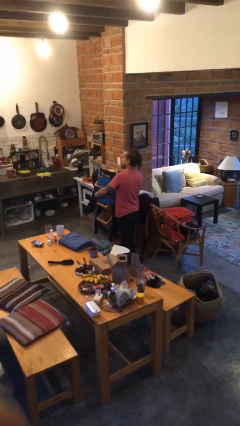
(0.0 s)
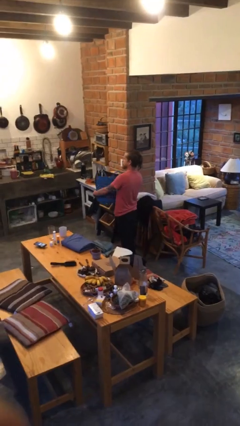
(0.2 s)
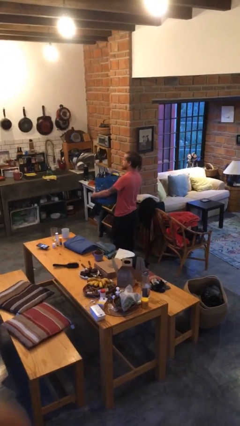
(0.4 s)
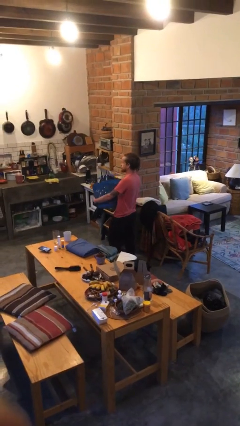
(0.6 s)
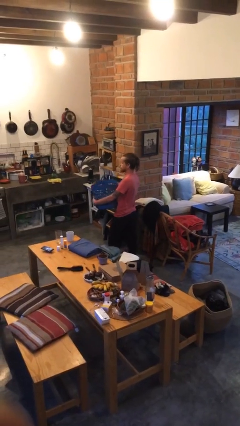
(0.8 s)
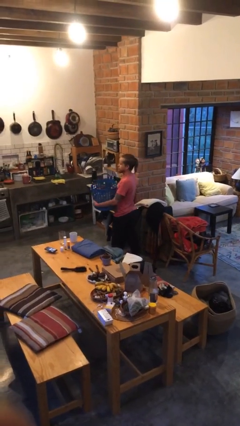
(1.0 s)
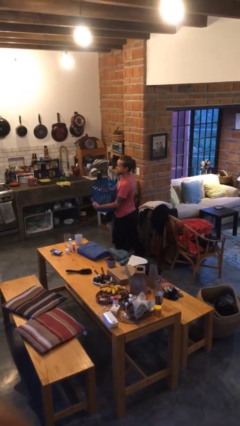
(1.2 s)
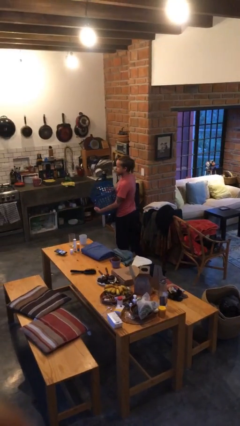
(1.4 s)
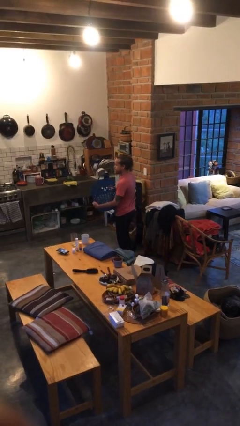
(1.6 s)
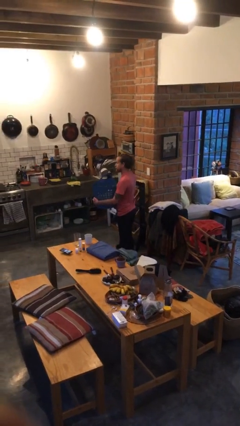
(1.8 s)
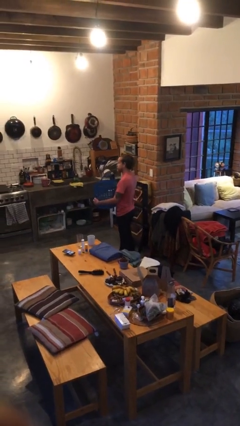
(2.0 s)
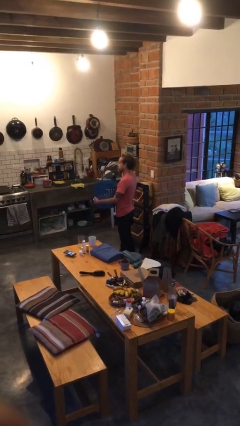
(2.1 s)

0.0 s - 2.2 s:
person carries laundry basket

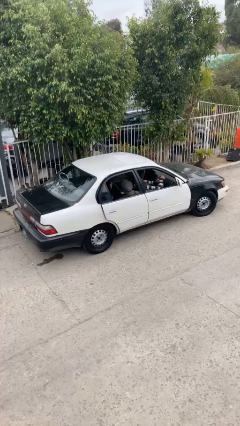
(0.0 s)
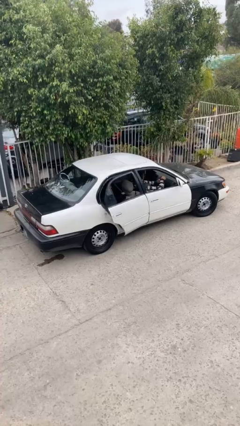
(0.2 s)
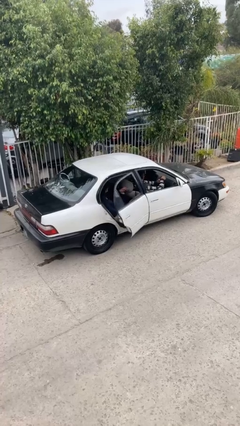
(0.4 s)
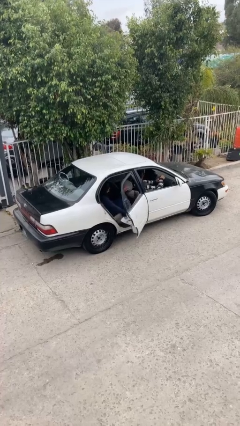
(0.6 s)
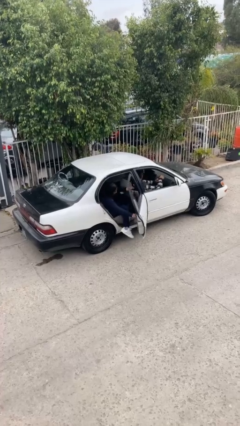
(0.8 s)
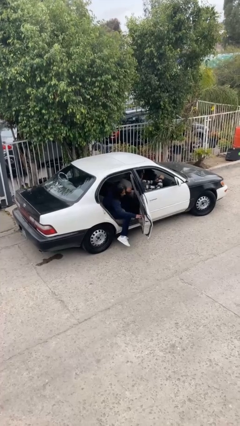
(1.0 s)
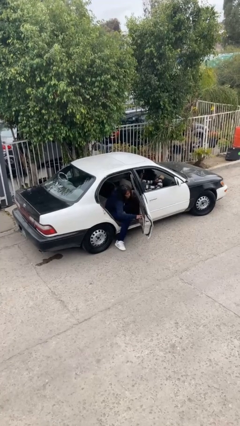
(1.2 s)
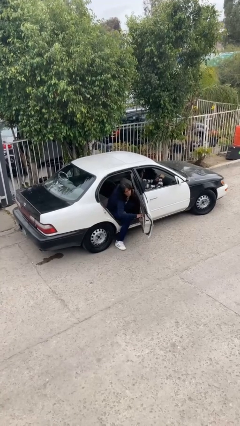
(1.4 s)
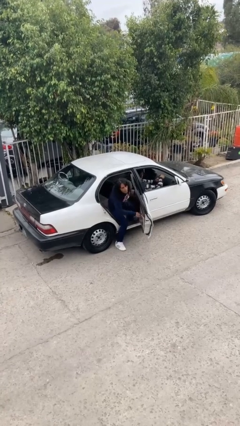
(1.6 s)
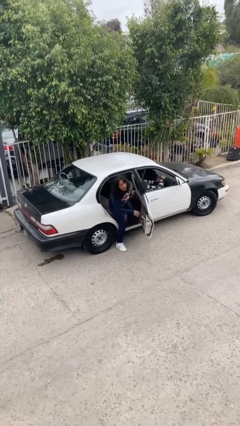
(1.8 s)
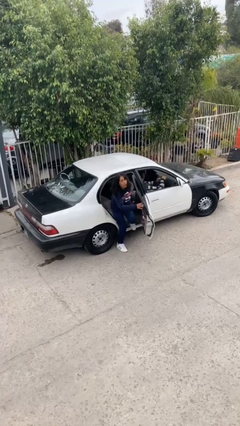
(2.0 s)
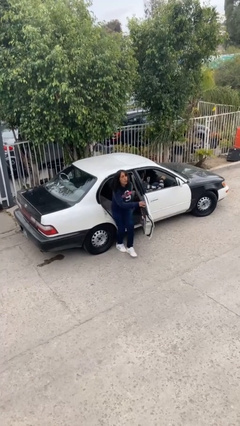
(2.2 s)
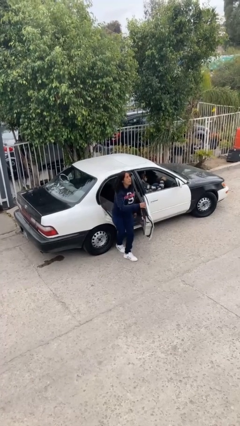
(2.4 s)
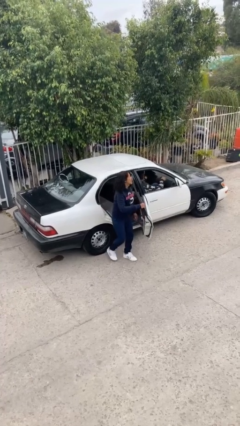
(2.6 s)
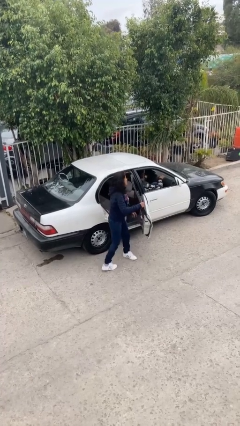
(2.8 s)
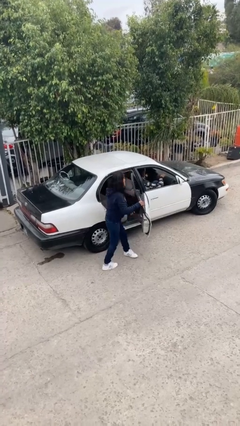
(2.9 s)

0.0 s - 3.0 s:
car drops off person

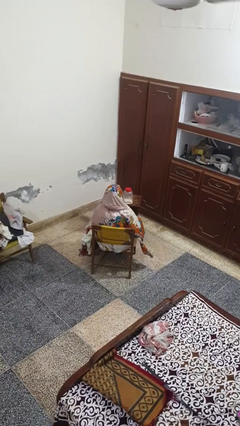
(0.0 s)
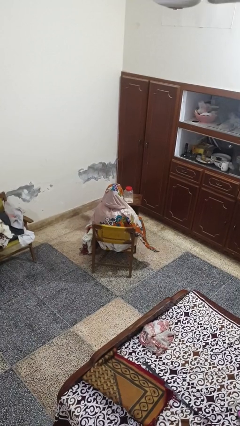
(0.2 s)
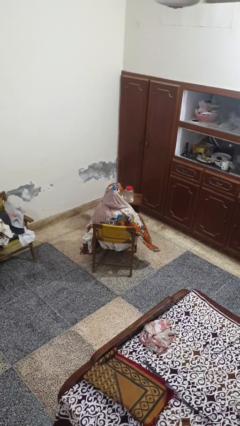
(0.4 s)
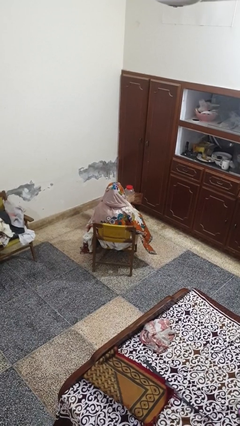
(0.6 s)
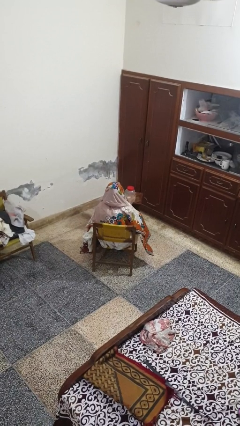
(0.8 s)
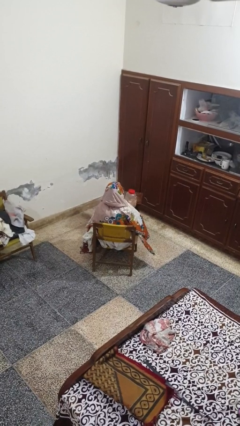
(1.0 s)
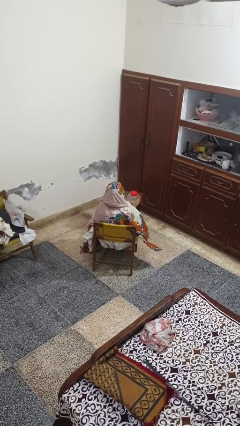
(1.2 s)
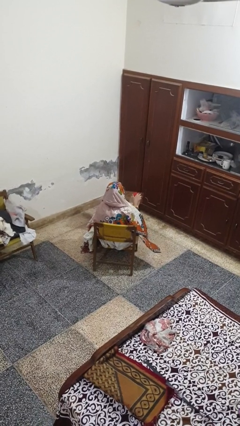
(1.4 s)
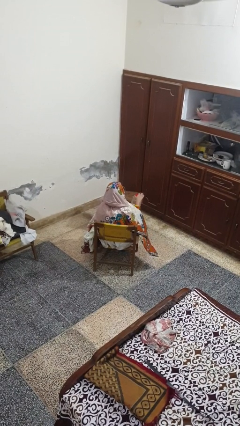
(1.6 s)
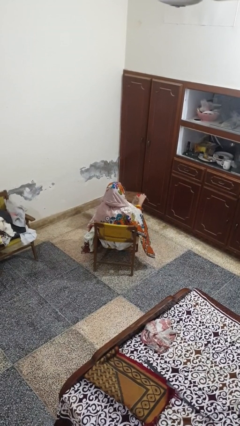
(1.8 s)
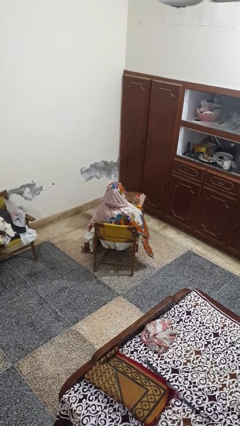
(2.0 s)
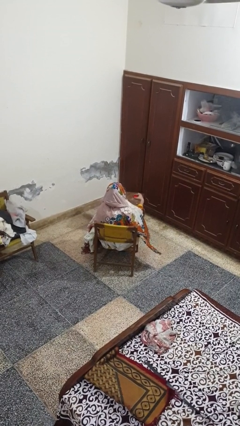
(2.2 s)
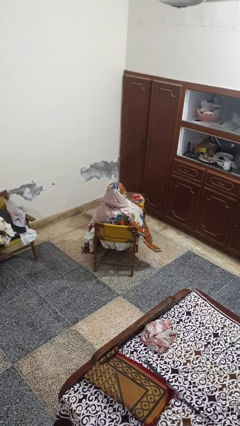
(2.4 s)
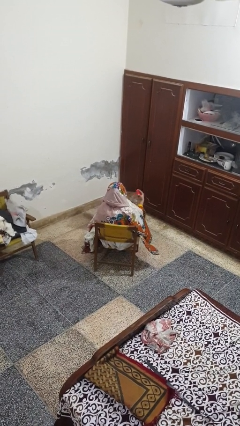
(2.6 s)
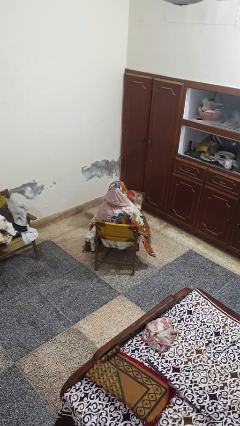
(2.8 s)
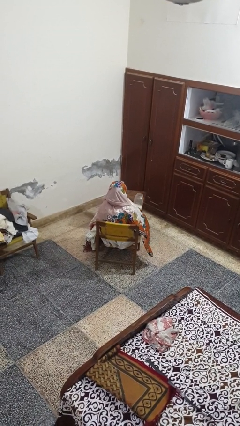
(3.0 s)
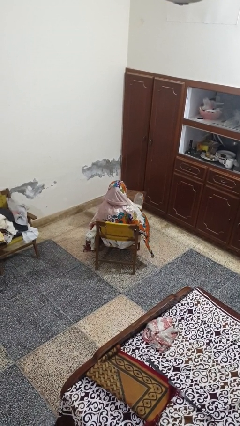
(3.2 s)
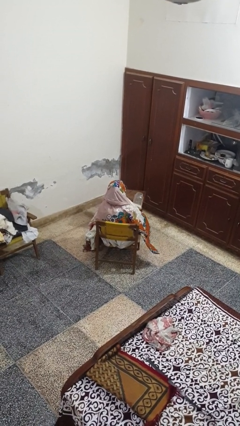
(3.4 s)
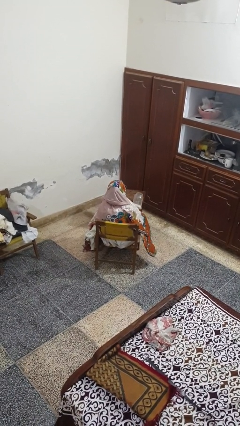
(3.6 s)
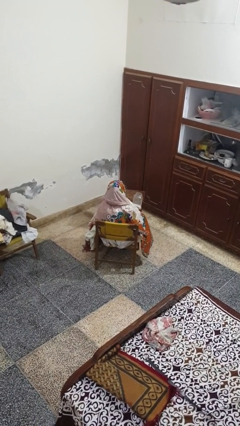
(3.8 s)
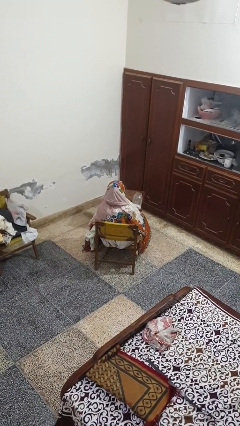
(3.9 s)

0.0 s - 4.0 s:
person opens jar

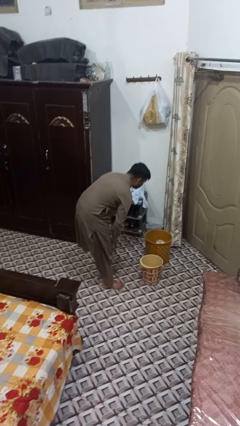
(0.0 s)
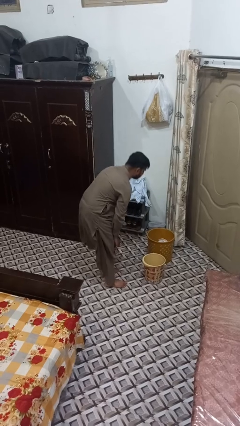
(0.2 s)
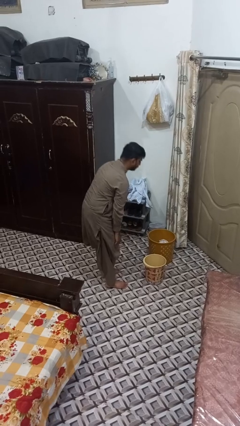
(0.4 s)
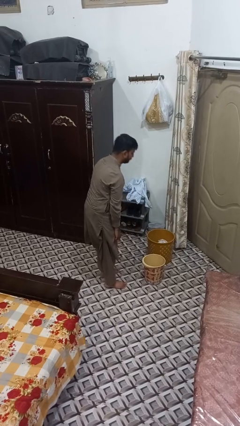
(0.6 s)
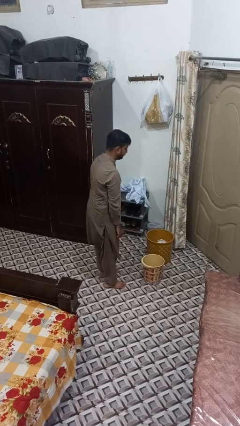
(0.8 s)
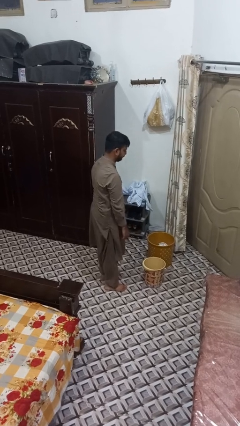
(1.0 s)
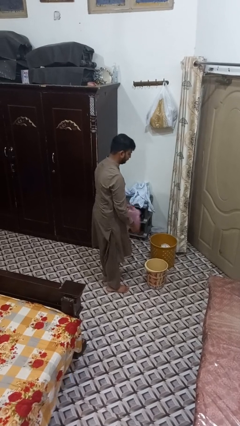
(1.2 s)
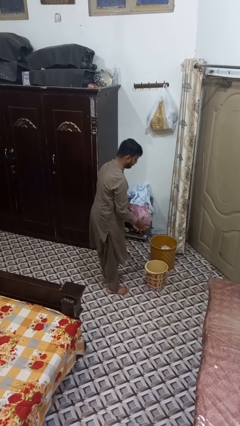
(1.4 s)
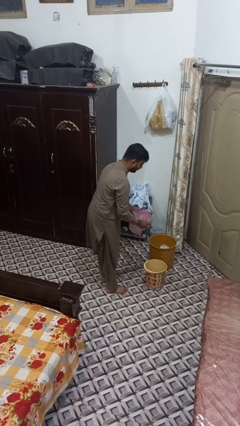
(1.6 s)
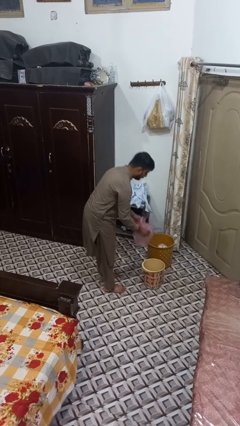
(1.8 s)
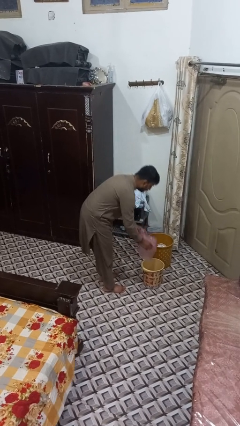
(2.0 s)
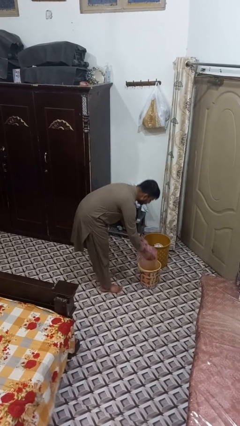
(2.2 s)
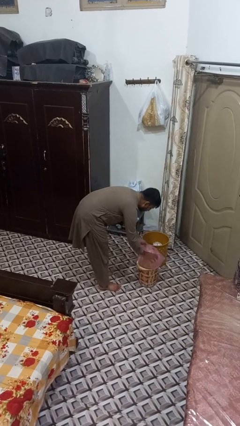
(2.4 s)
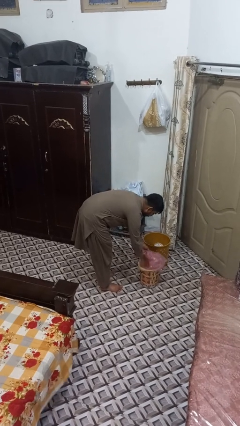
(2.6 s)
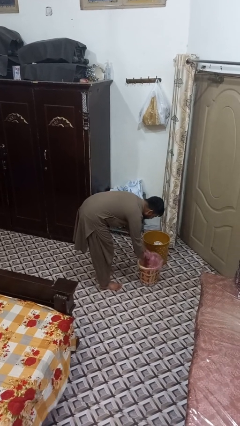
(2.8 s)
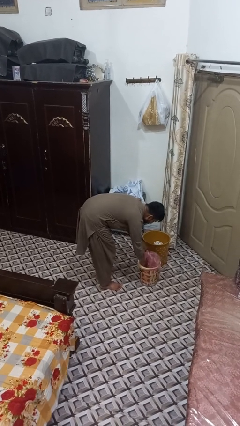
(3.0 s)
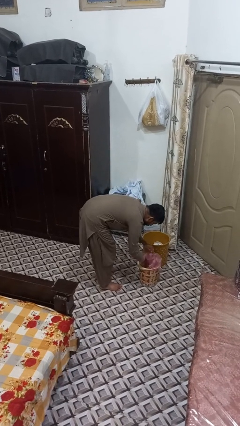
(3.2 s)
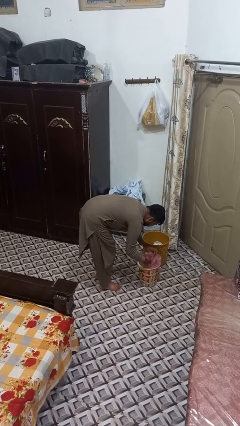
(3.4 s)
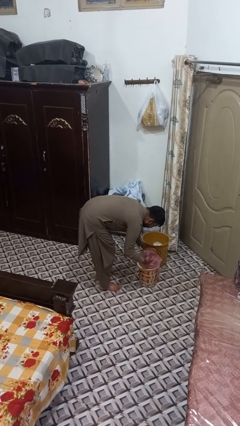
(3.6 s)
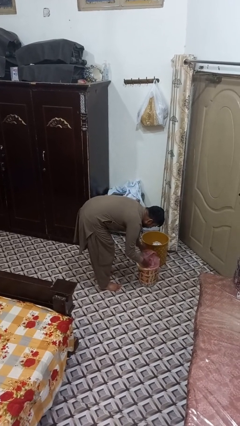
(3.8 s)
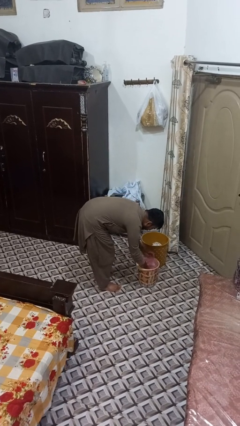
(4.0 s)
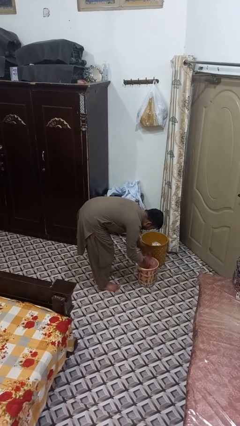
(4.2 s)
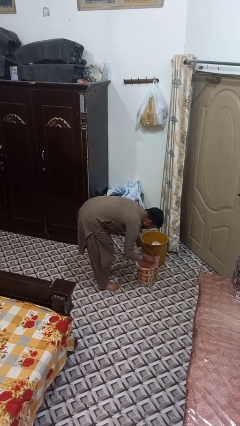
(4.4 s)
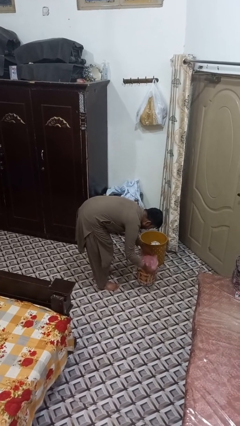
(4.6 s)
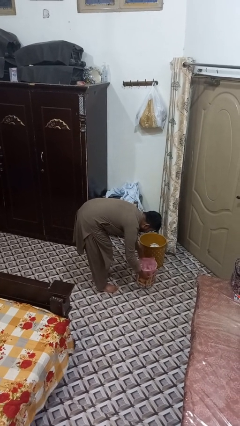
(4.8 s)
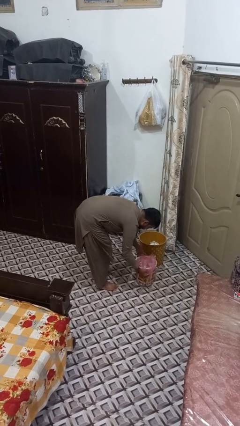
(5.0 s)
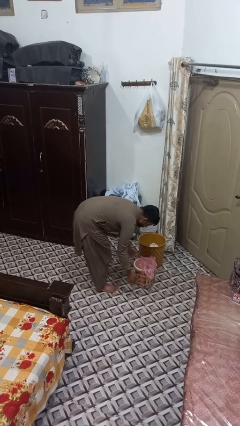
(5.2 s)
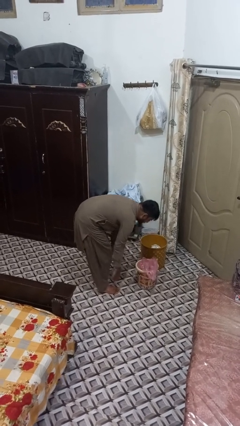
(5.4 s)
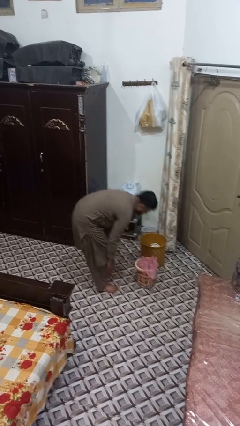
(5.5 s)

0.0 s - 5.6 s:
person inserts trashbag into trashcan

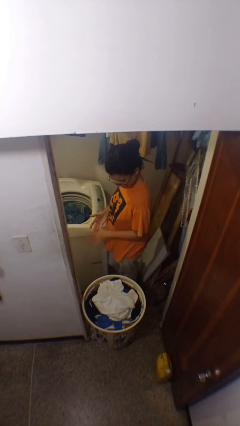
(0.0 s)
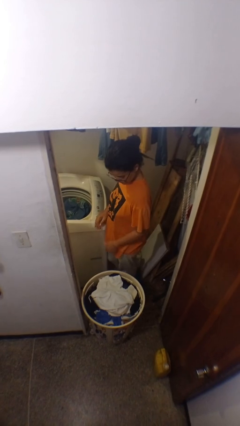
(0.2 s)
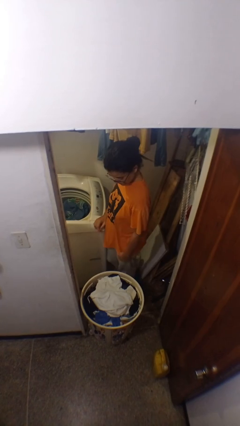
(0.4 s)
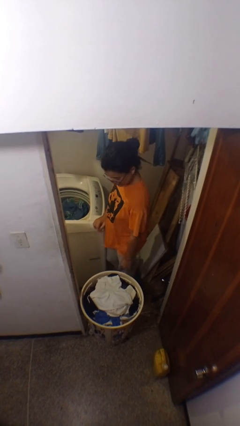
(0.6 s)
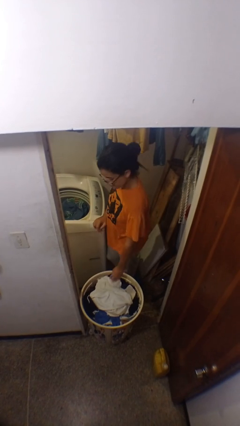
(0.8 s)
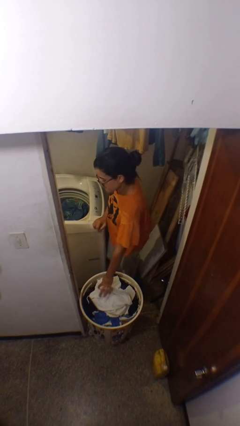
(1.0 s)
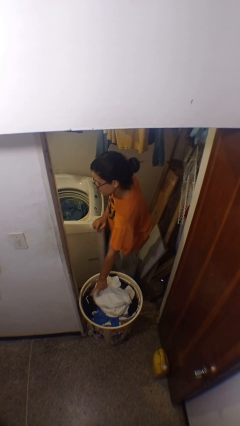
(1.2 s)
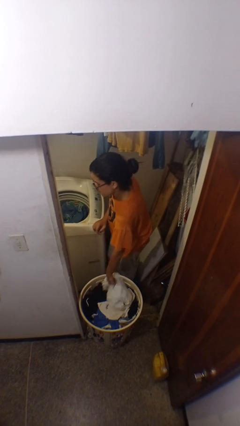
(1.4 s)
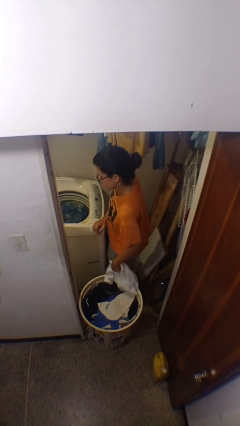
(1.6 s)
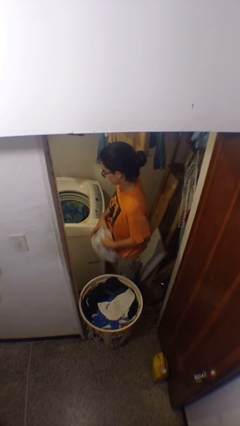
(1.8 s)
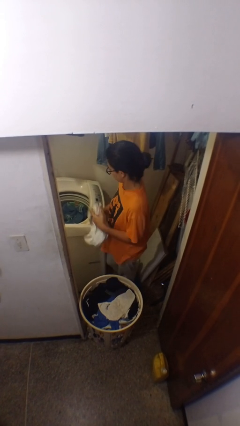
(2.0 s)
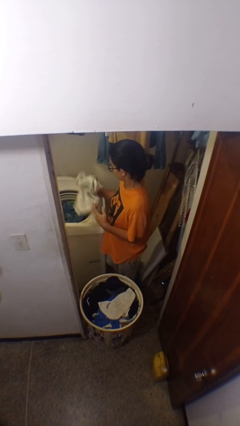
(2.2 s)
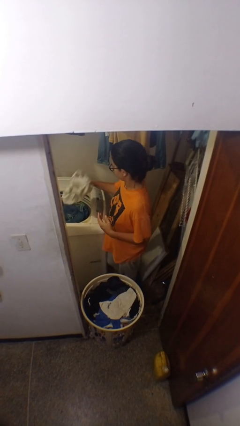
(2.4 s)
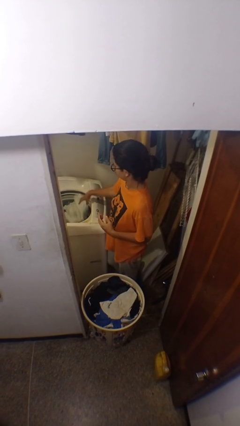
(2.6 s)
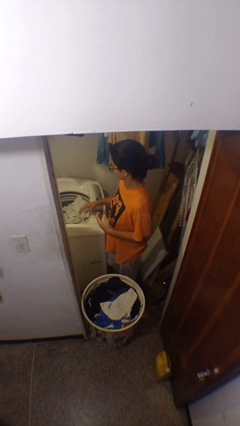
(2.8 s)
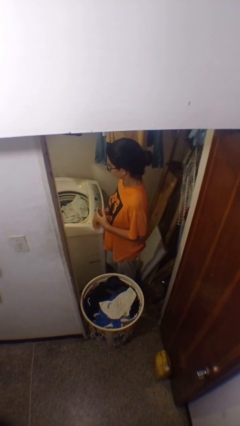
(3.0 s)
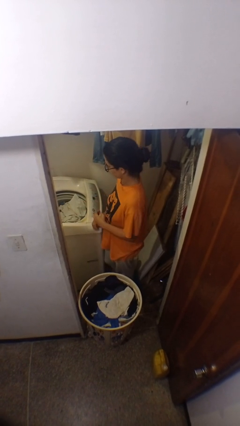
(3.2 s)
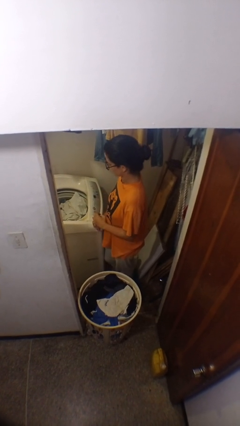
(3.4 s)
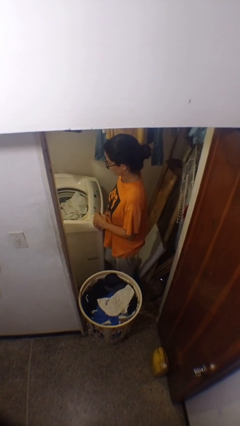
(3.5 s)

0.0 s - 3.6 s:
person loads clotheswasher
